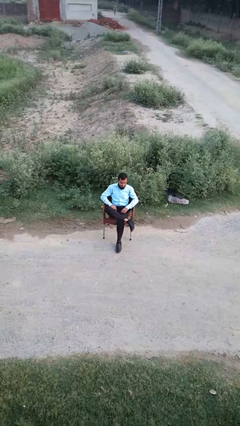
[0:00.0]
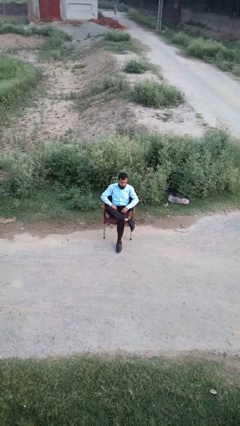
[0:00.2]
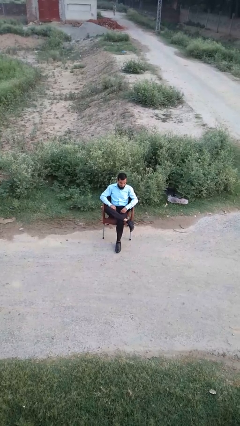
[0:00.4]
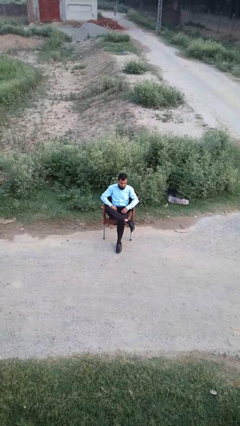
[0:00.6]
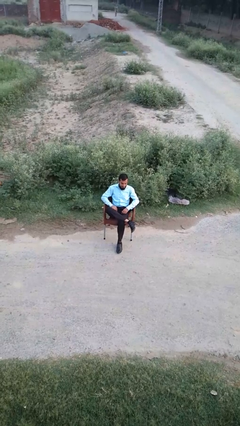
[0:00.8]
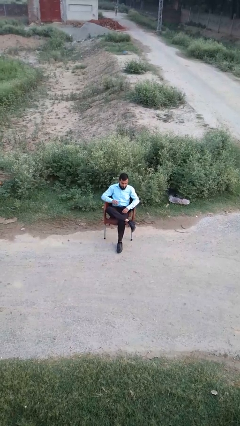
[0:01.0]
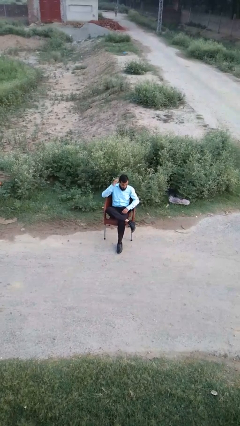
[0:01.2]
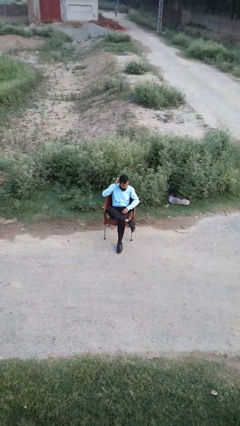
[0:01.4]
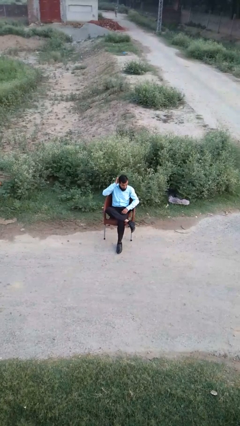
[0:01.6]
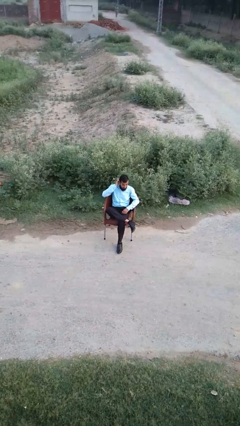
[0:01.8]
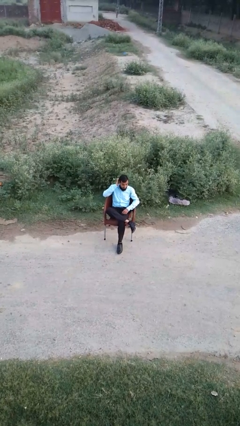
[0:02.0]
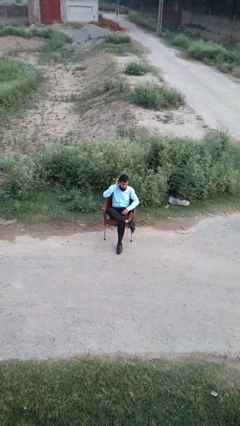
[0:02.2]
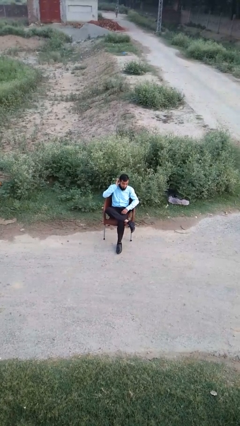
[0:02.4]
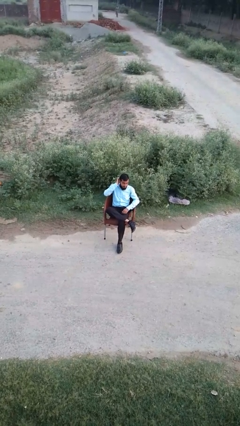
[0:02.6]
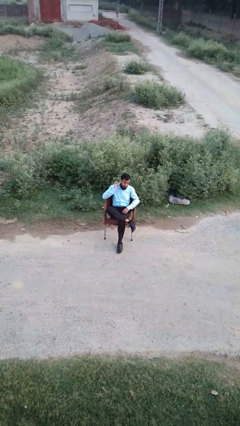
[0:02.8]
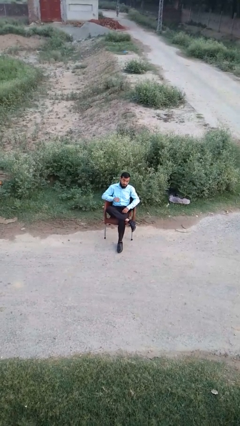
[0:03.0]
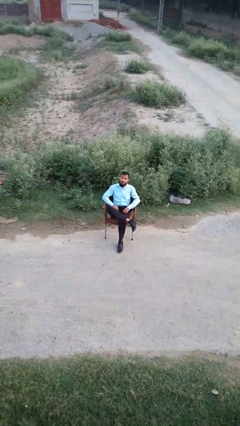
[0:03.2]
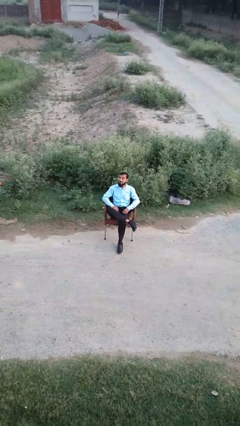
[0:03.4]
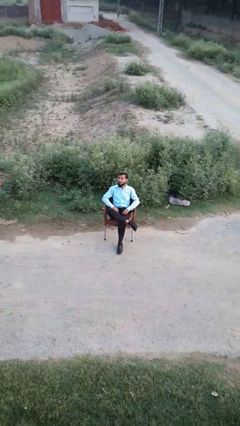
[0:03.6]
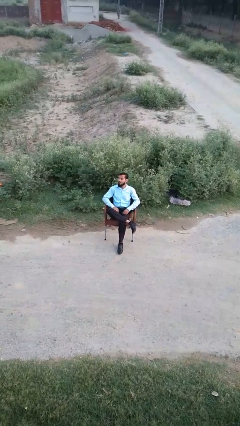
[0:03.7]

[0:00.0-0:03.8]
person scratches face

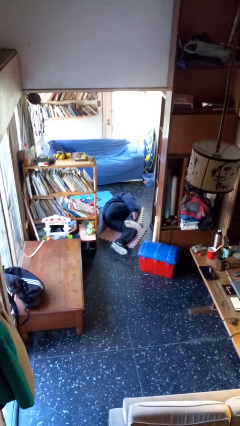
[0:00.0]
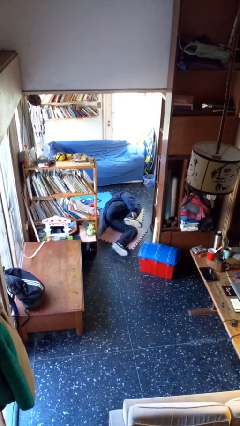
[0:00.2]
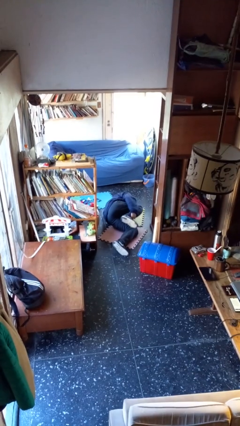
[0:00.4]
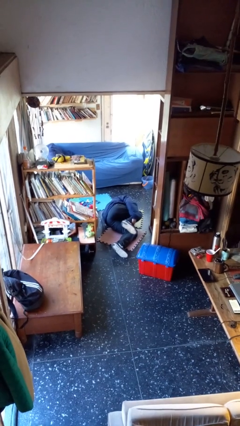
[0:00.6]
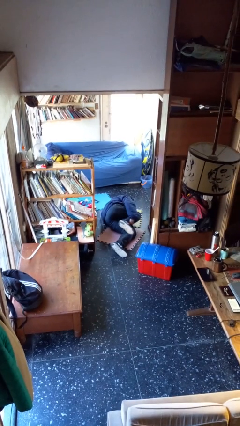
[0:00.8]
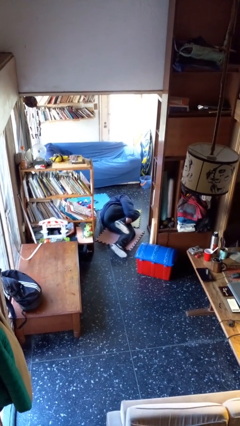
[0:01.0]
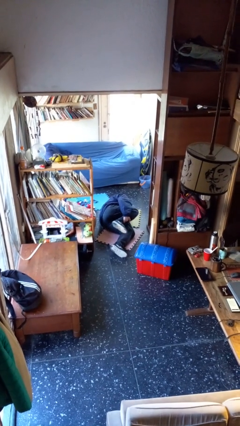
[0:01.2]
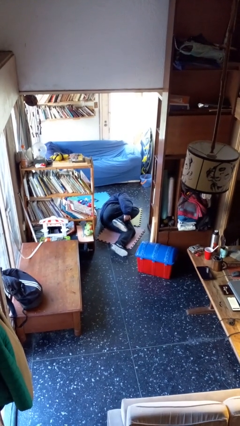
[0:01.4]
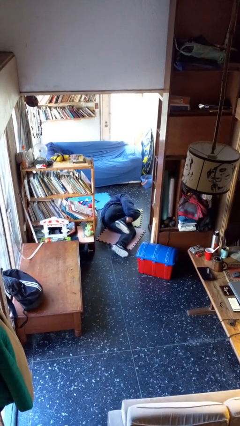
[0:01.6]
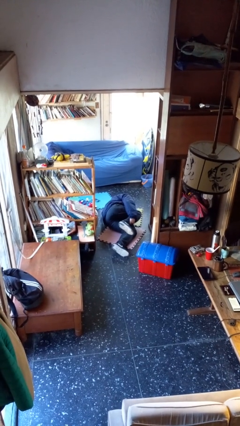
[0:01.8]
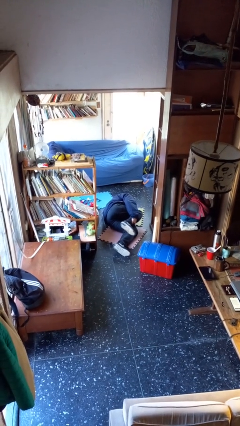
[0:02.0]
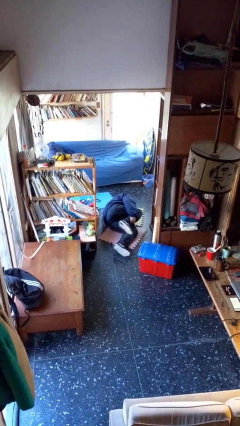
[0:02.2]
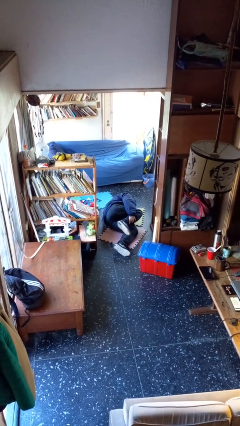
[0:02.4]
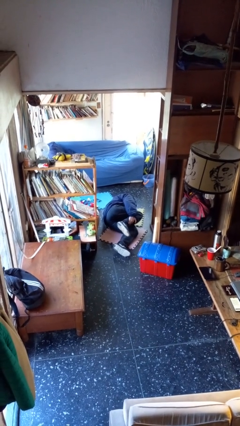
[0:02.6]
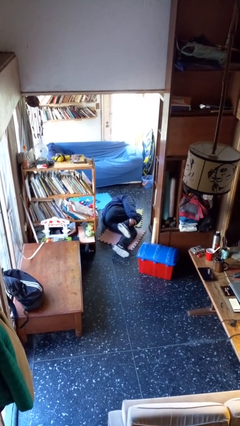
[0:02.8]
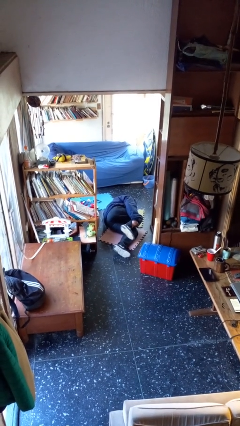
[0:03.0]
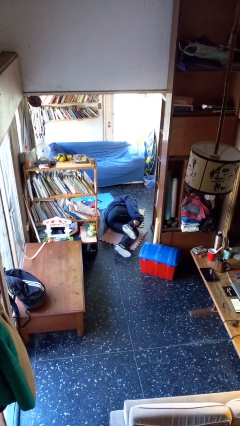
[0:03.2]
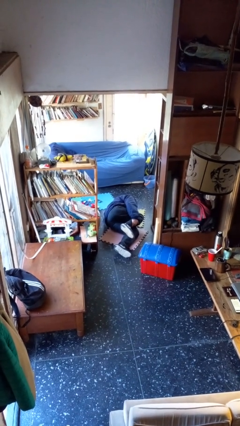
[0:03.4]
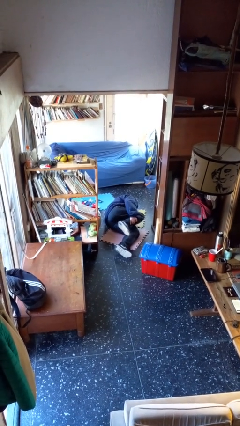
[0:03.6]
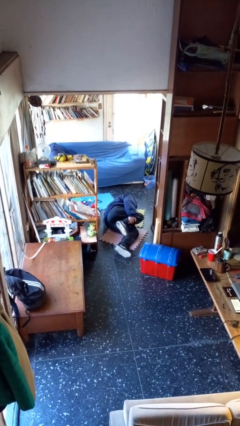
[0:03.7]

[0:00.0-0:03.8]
person lies down on floor

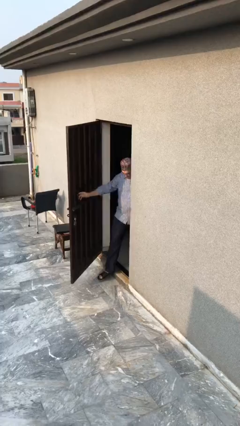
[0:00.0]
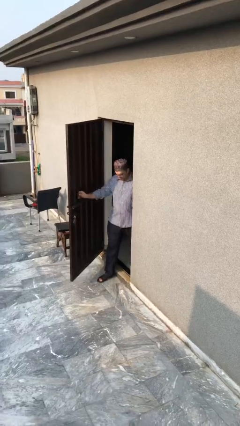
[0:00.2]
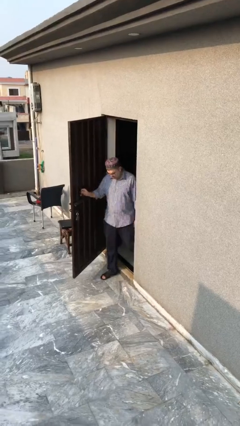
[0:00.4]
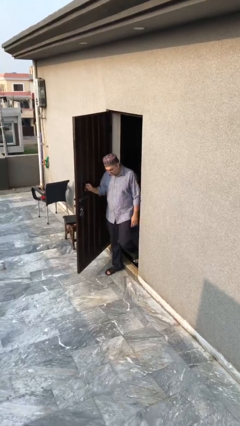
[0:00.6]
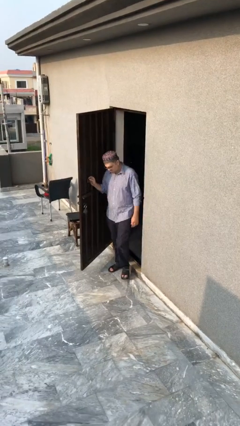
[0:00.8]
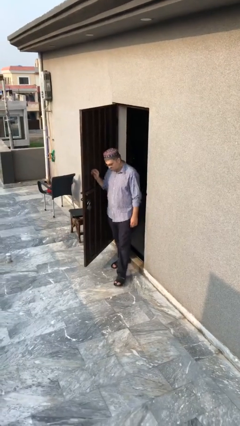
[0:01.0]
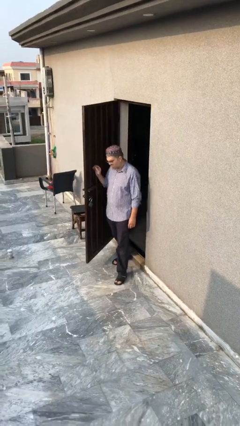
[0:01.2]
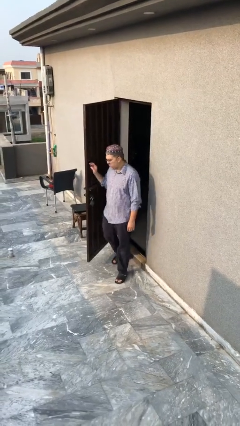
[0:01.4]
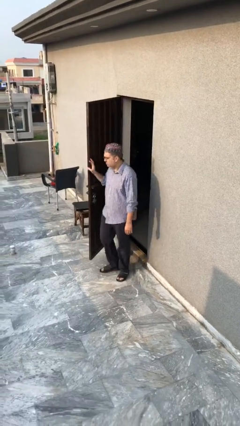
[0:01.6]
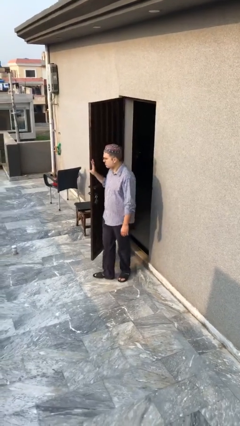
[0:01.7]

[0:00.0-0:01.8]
person enters scene through structure

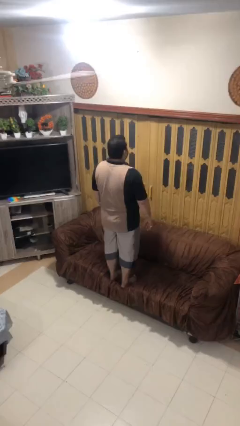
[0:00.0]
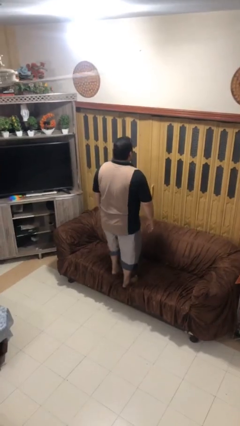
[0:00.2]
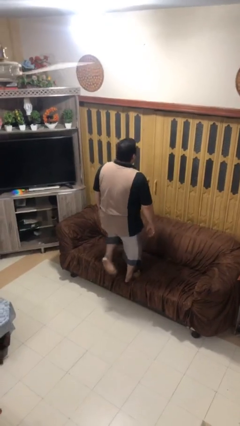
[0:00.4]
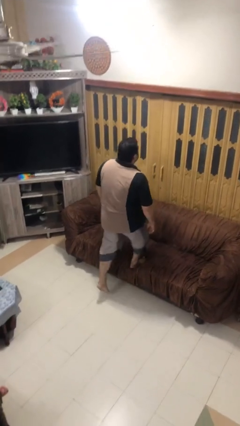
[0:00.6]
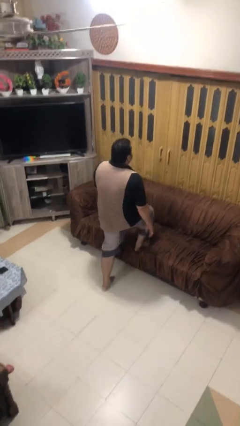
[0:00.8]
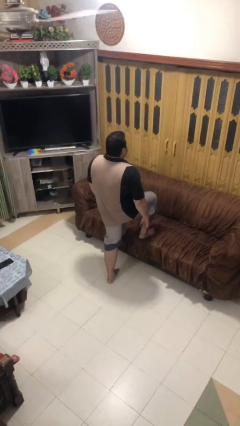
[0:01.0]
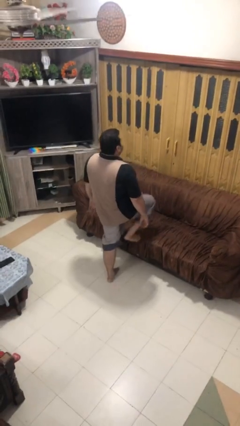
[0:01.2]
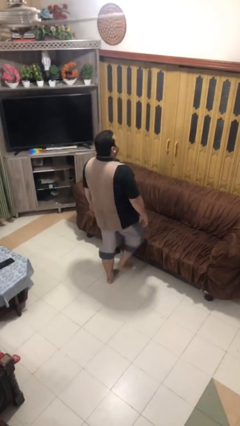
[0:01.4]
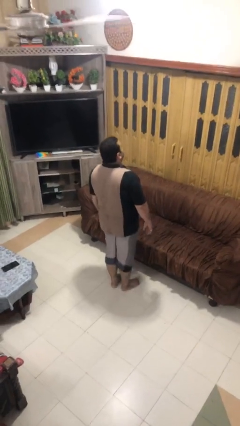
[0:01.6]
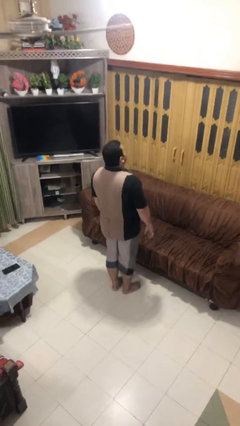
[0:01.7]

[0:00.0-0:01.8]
person climbs off couch

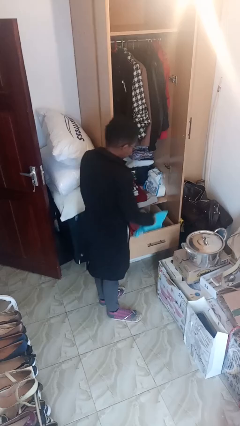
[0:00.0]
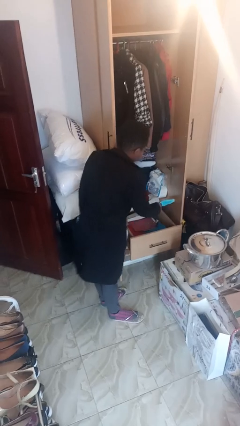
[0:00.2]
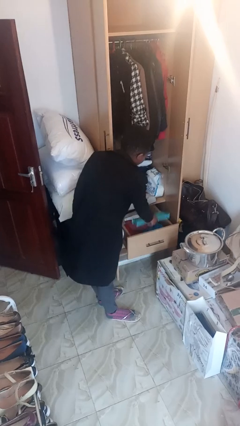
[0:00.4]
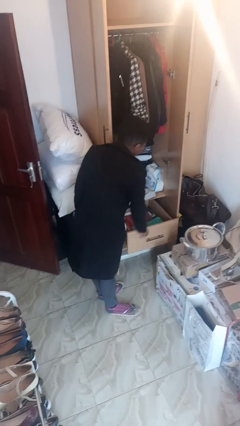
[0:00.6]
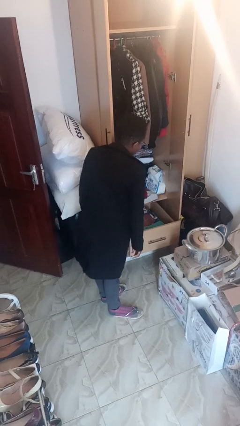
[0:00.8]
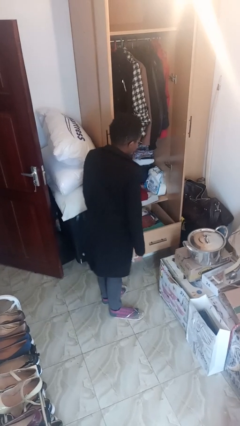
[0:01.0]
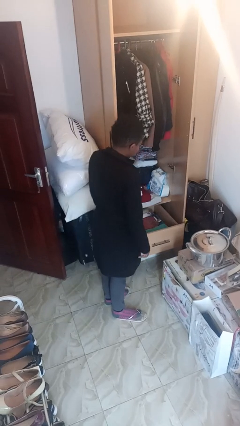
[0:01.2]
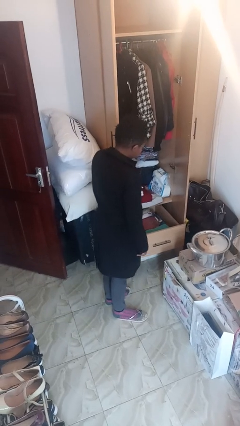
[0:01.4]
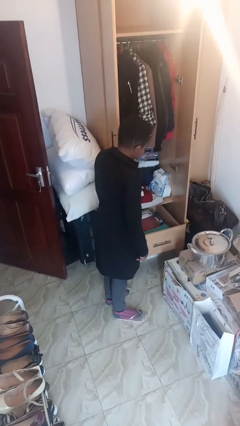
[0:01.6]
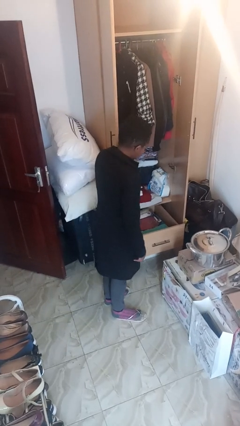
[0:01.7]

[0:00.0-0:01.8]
person puts clothes into dresser

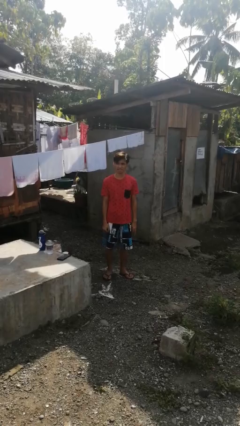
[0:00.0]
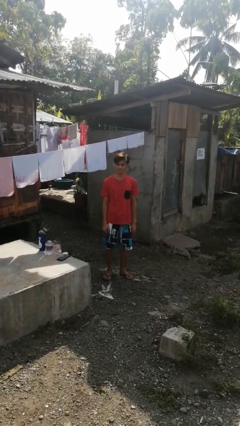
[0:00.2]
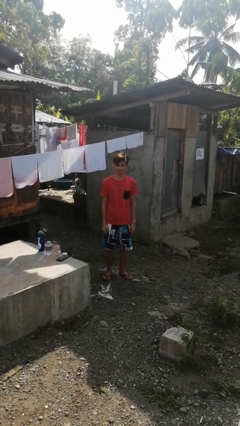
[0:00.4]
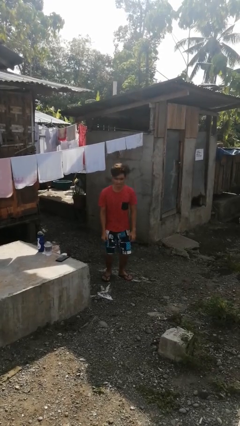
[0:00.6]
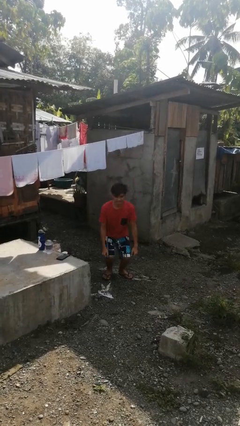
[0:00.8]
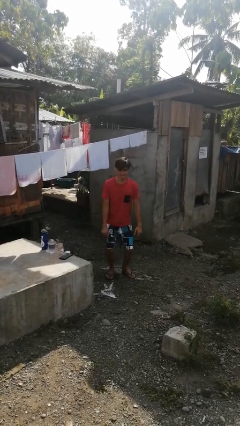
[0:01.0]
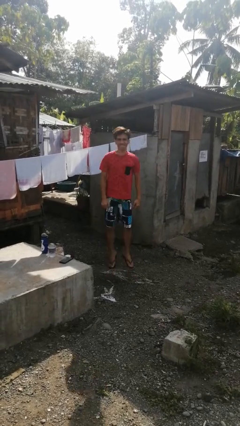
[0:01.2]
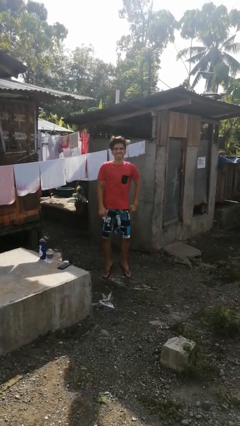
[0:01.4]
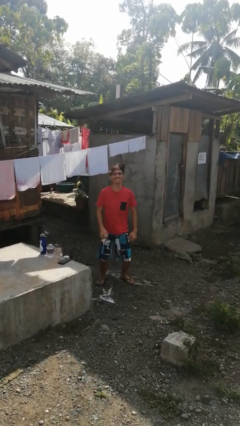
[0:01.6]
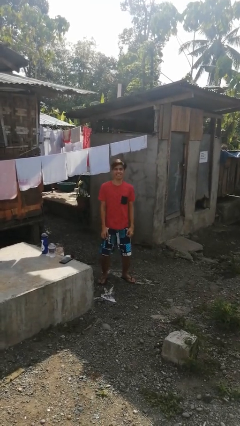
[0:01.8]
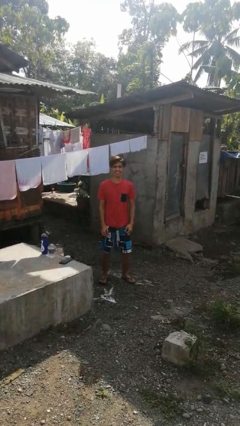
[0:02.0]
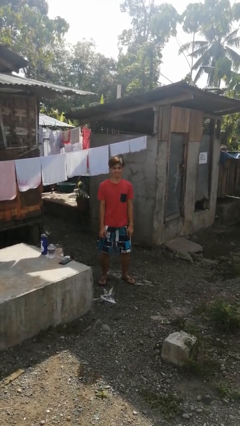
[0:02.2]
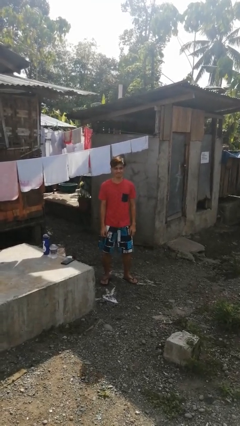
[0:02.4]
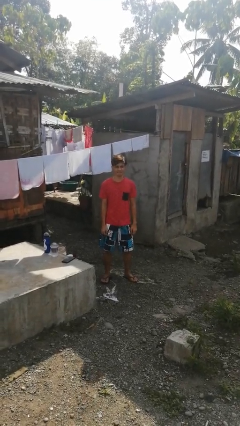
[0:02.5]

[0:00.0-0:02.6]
person jumps

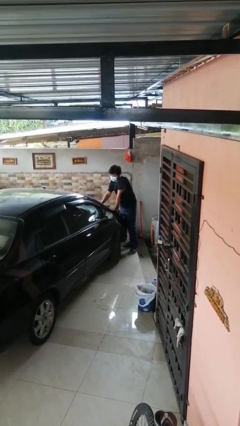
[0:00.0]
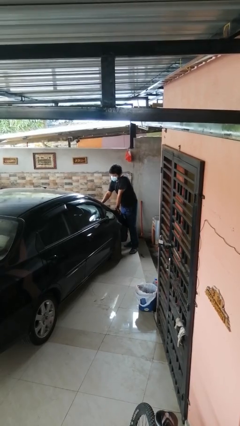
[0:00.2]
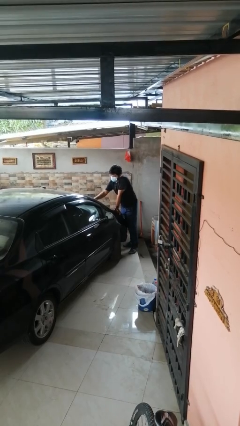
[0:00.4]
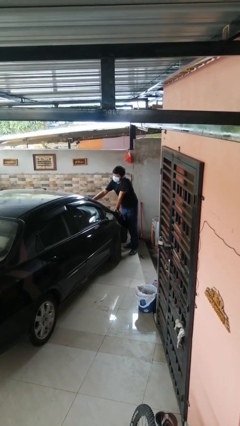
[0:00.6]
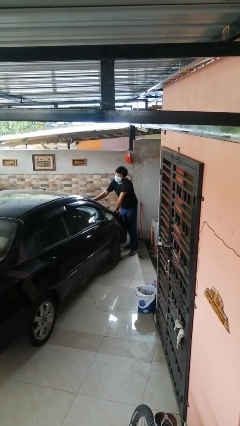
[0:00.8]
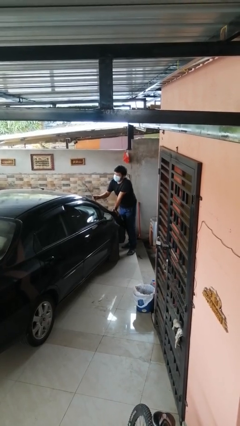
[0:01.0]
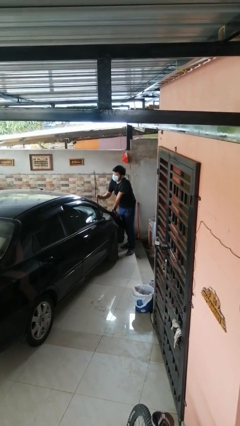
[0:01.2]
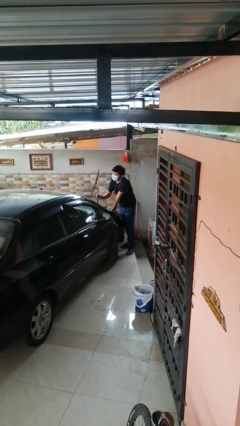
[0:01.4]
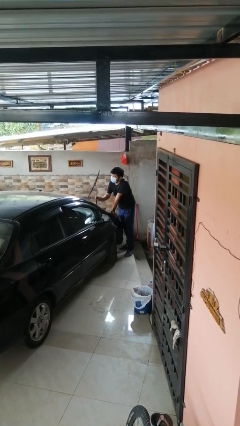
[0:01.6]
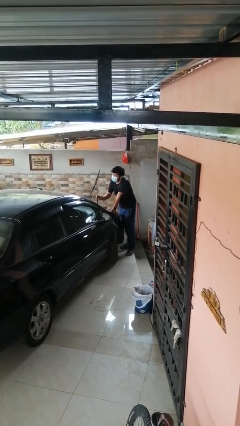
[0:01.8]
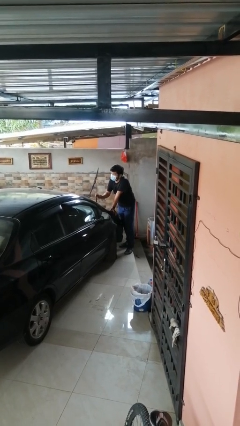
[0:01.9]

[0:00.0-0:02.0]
person flips up car wipers
